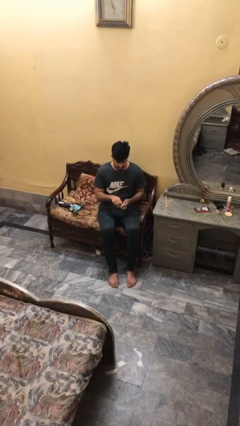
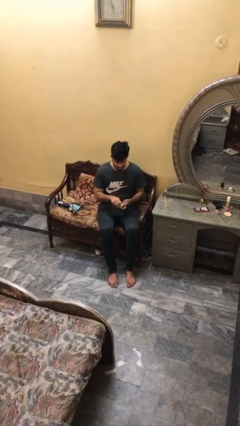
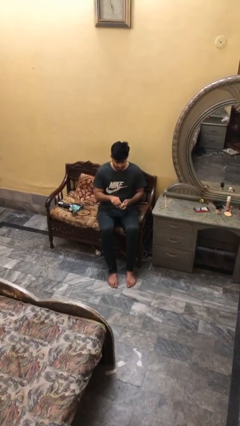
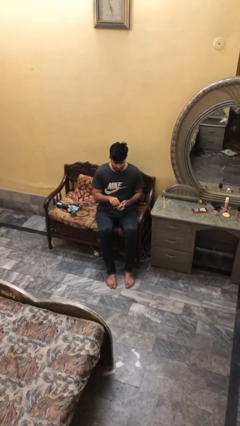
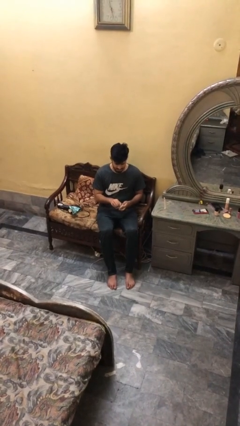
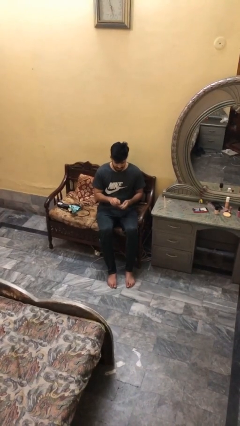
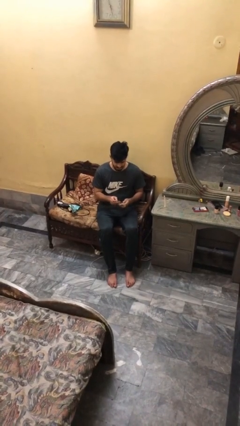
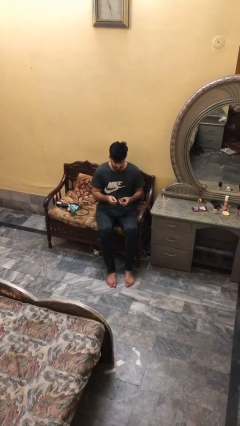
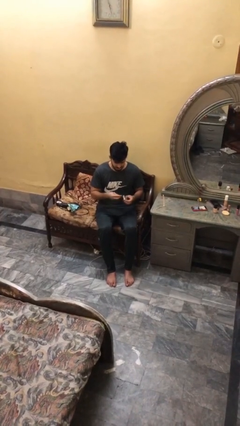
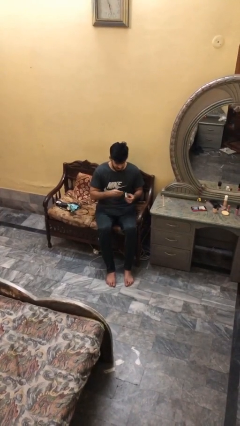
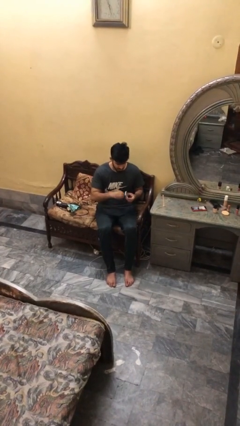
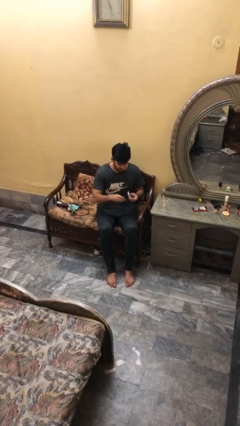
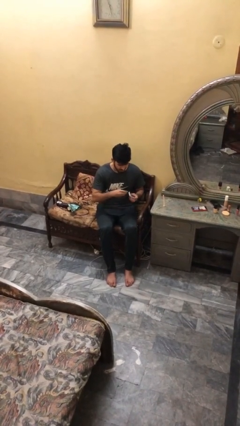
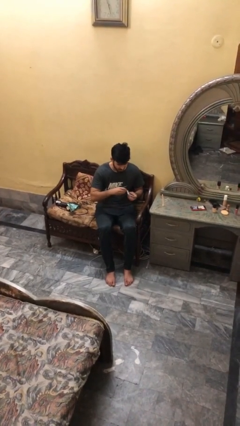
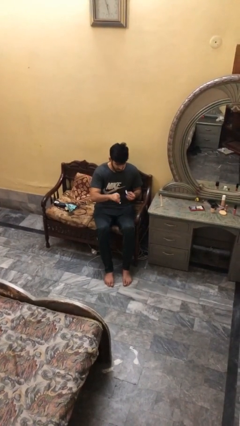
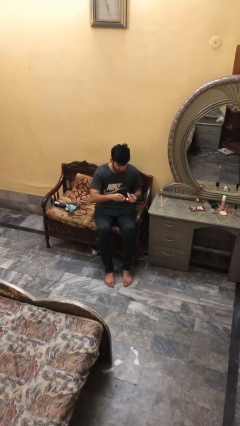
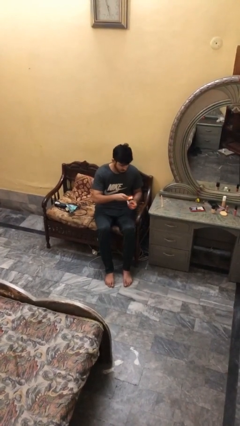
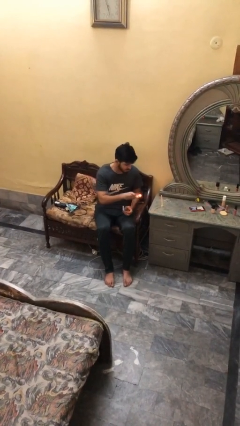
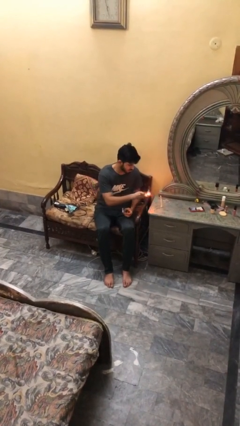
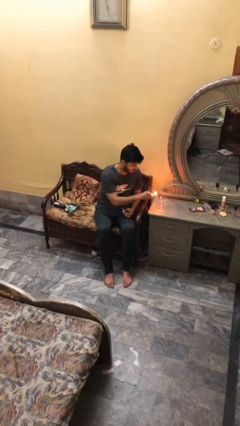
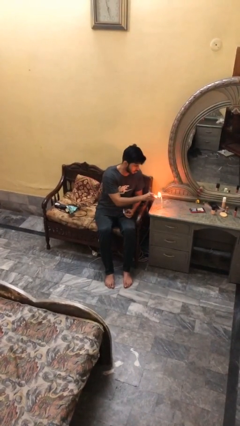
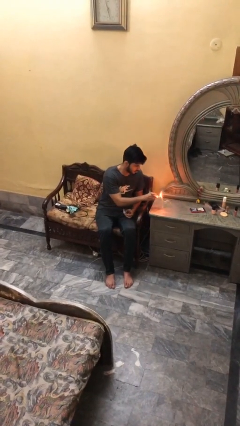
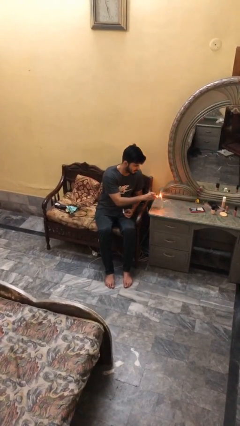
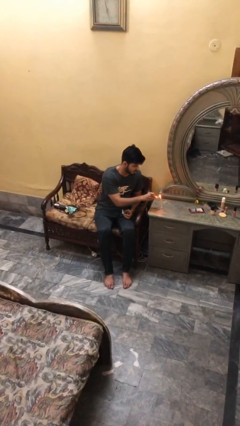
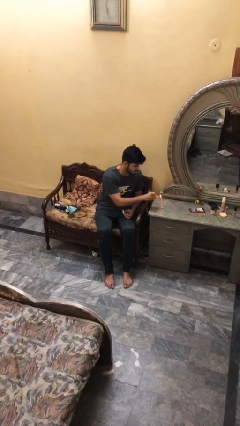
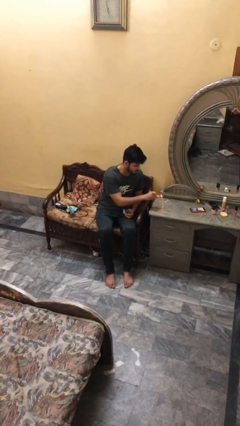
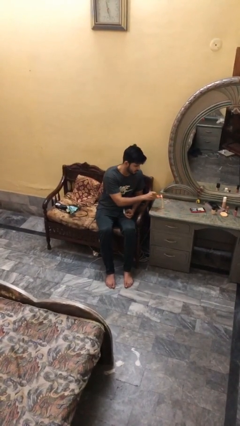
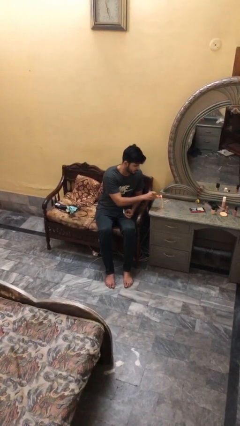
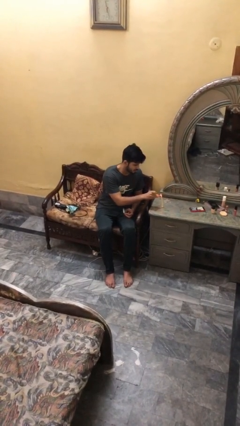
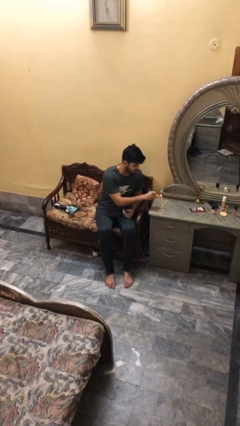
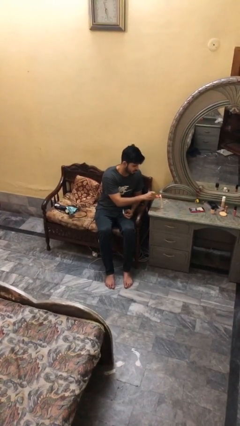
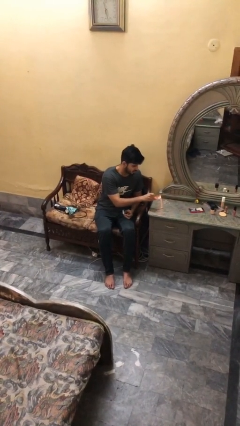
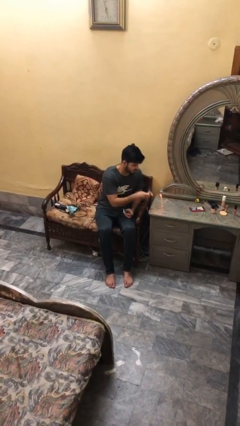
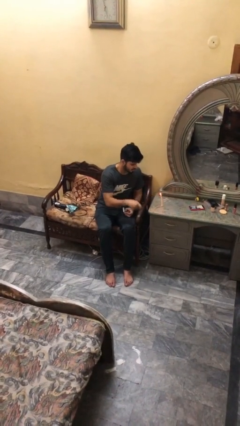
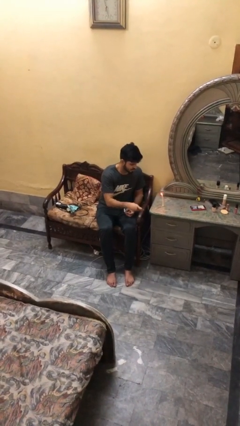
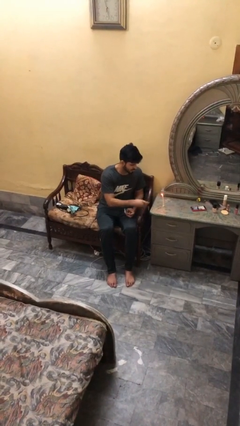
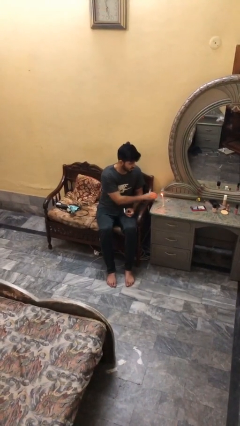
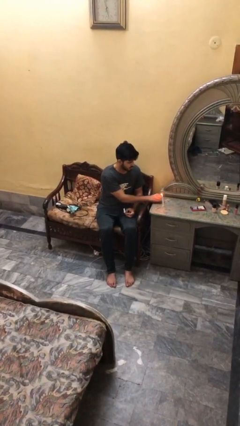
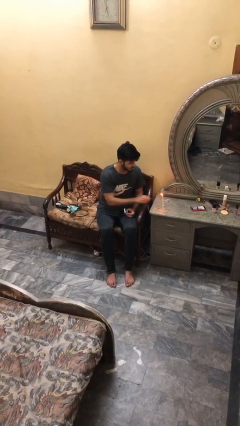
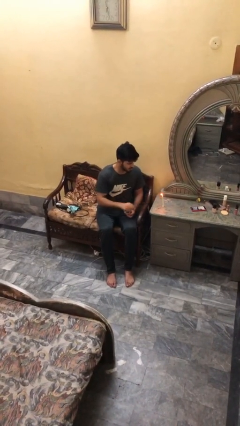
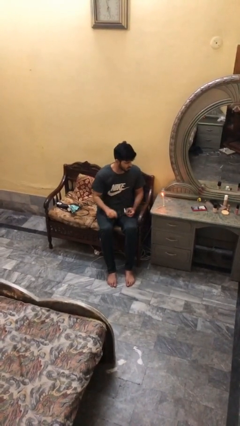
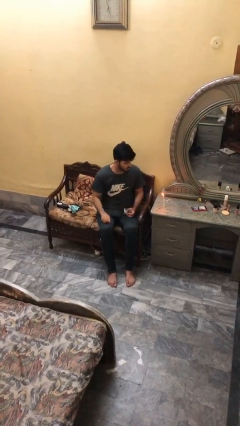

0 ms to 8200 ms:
person lights candle

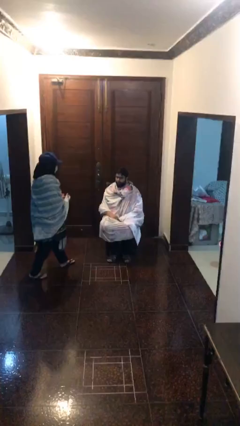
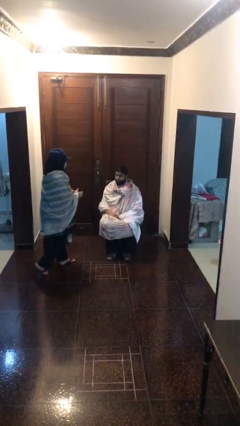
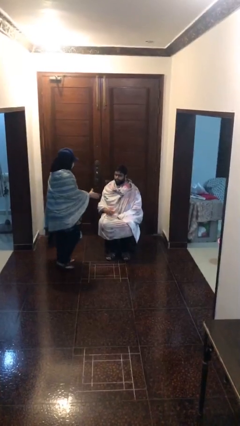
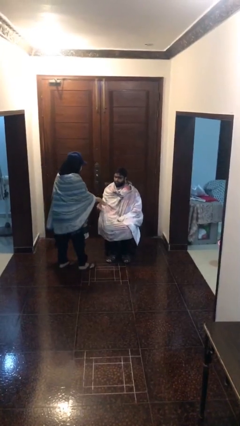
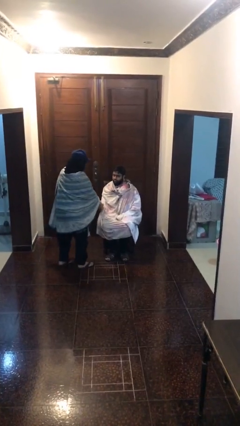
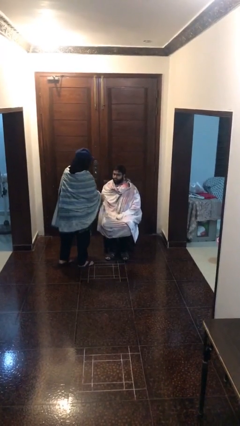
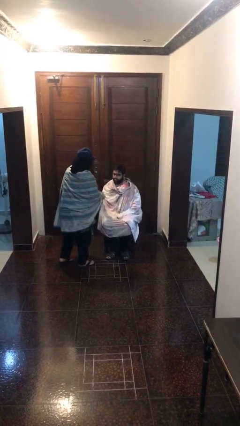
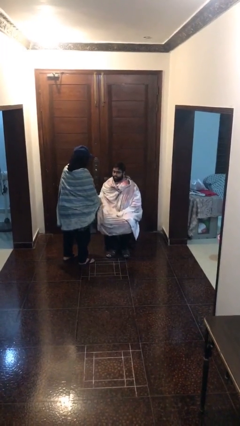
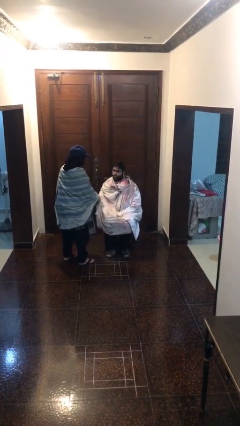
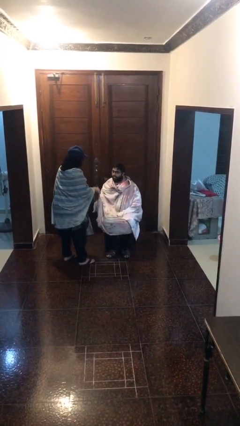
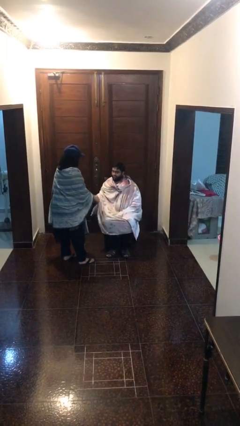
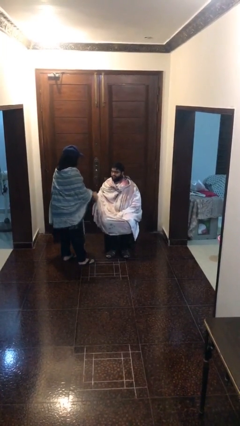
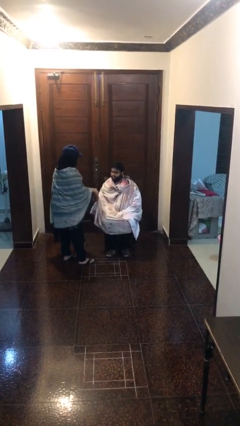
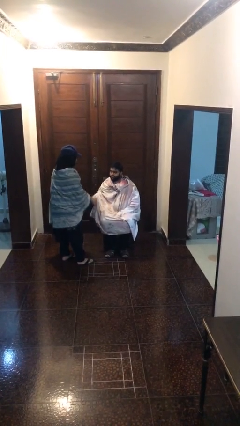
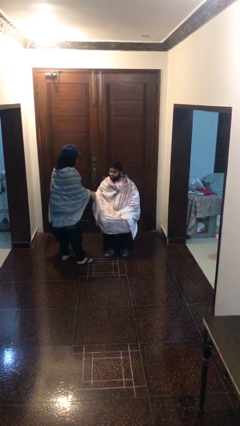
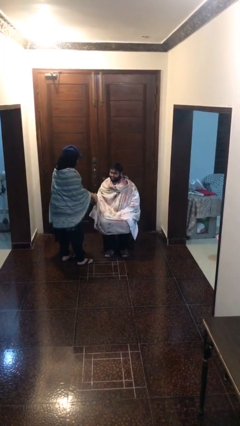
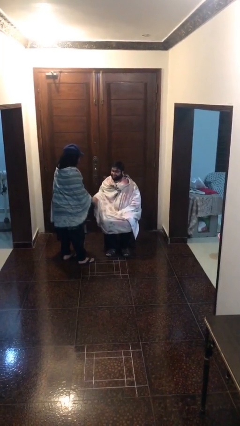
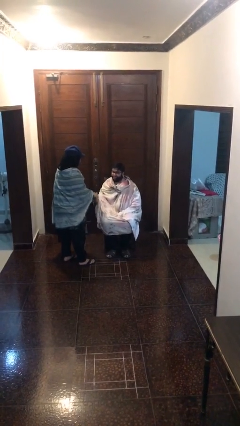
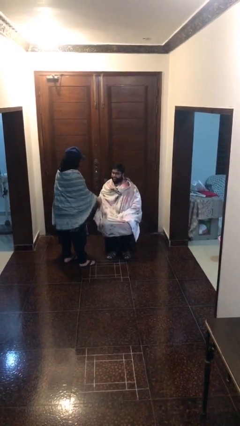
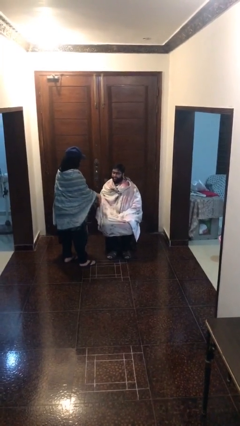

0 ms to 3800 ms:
person shakes hand

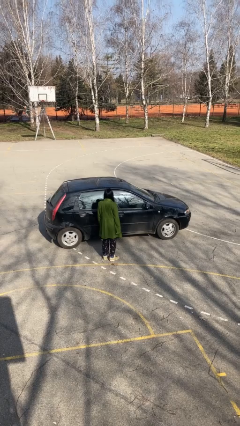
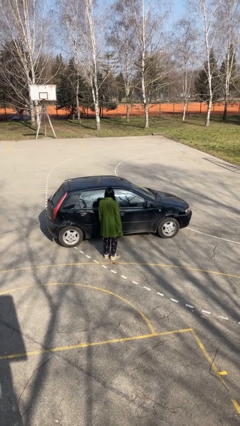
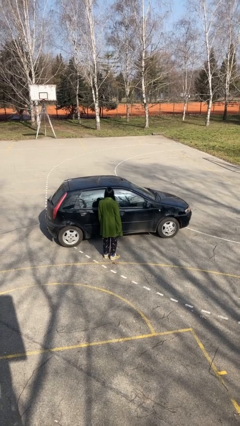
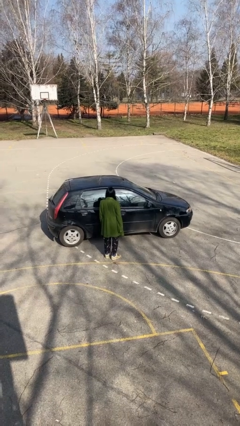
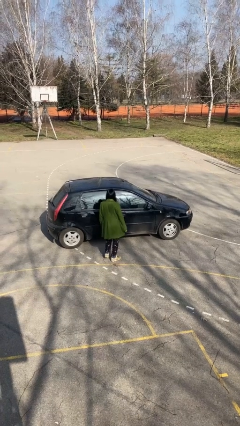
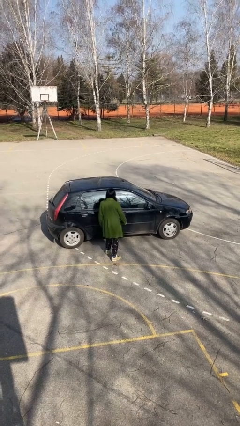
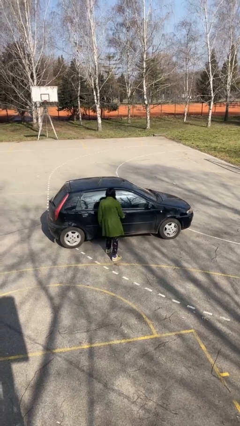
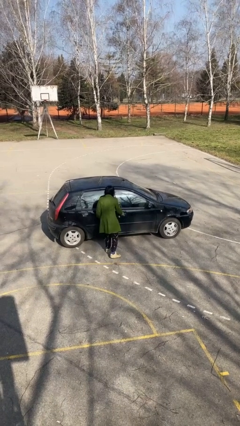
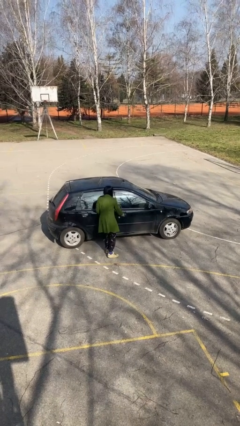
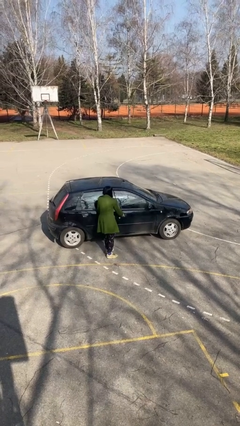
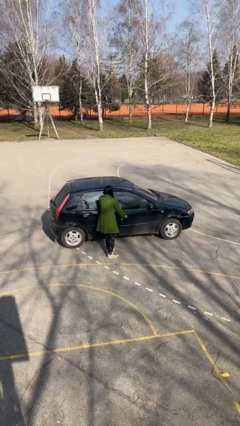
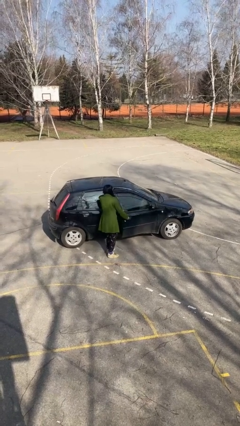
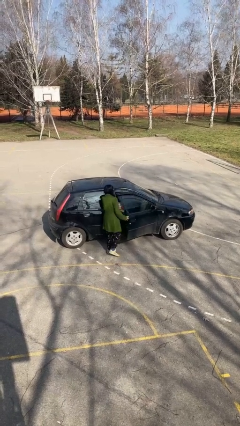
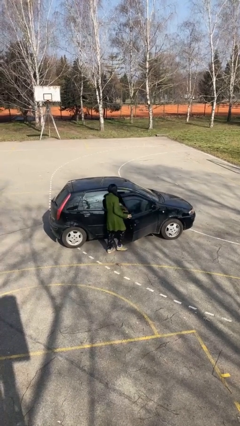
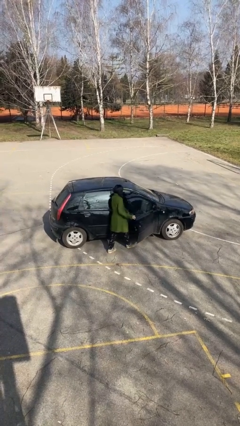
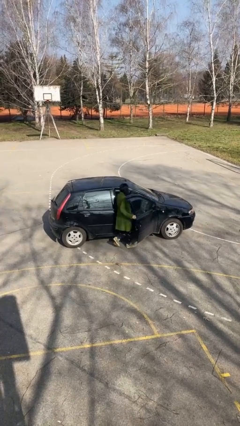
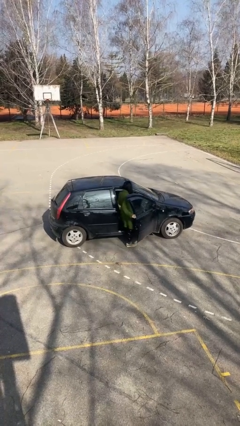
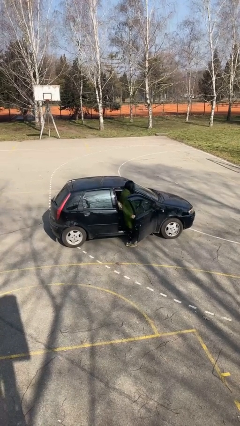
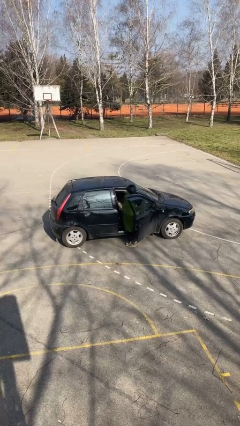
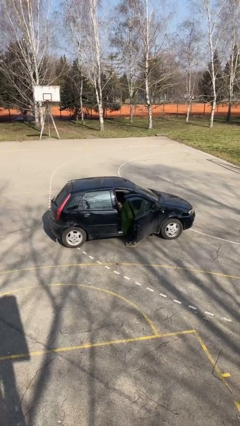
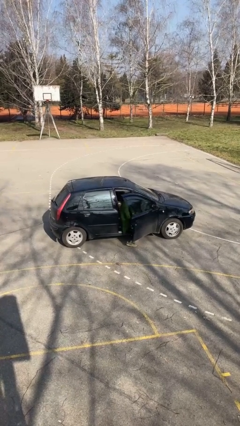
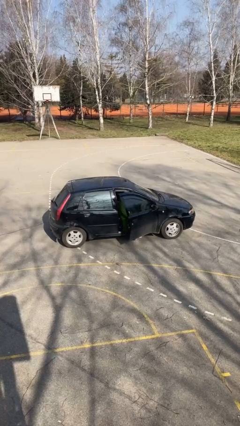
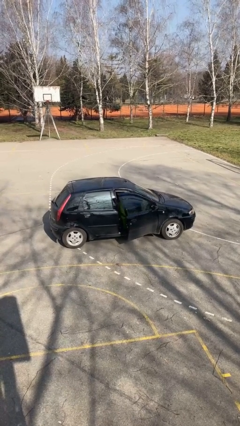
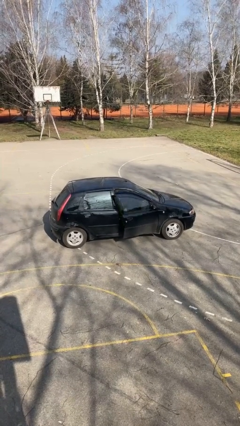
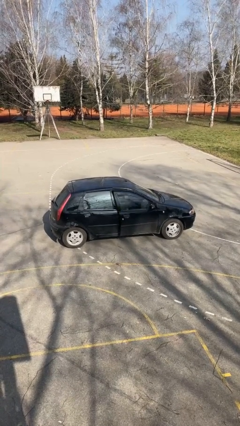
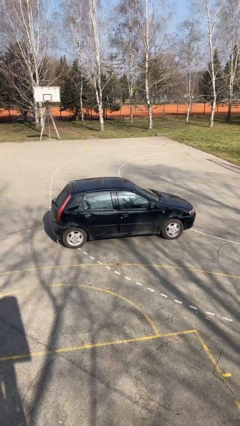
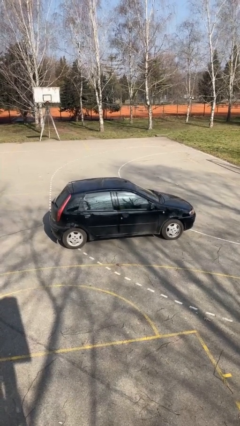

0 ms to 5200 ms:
car picks up person

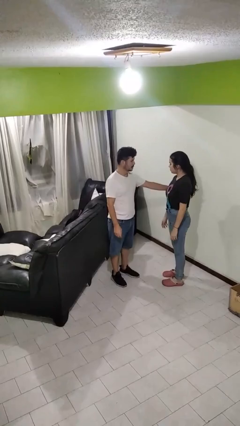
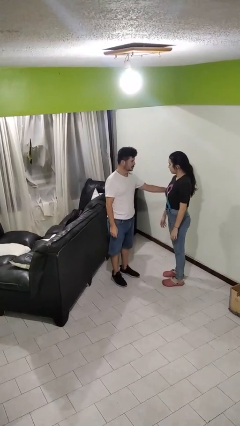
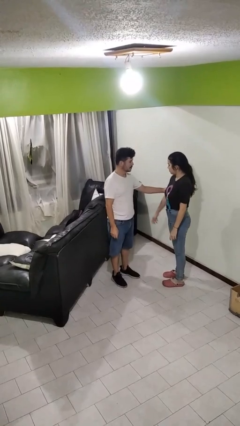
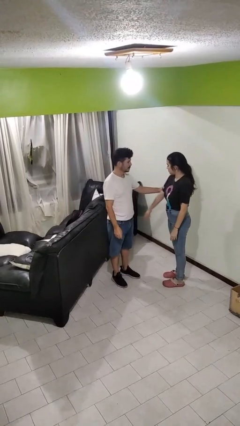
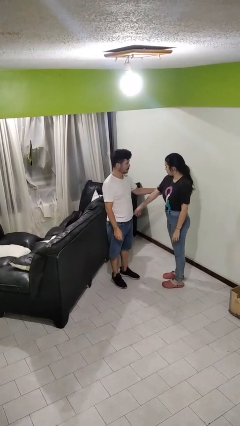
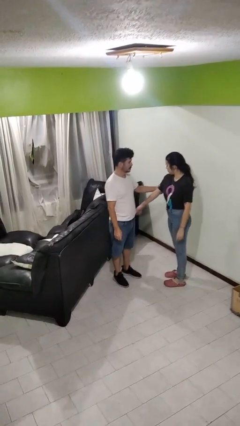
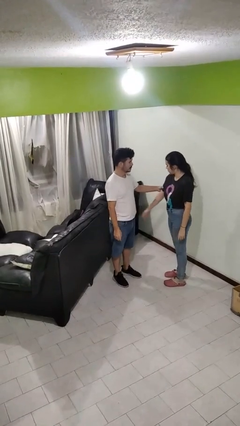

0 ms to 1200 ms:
person grabs person by bicep
